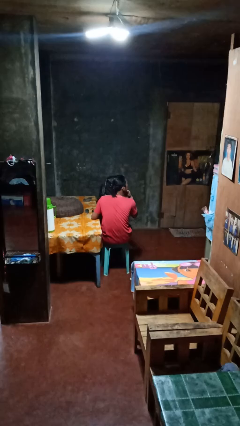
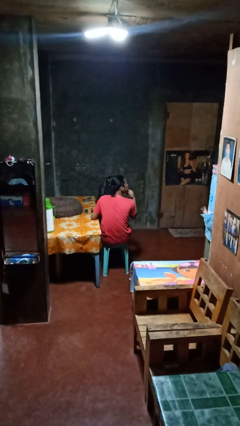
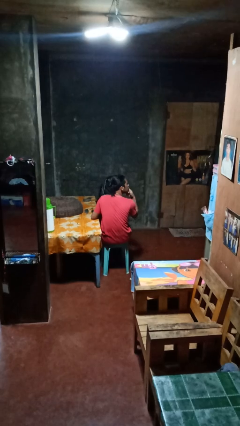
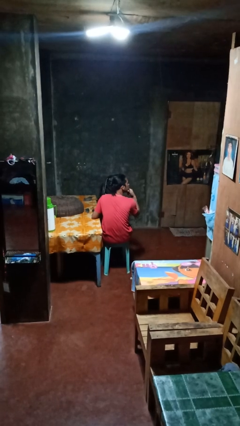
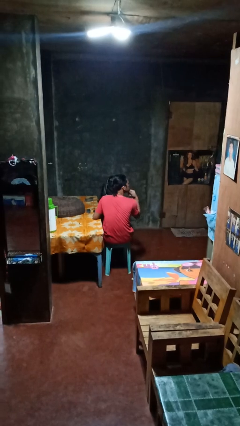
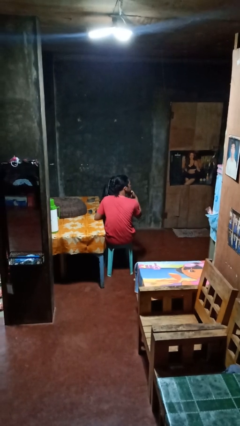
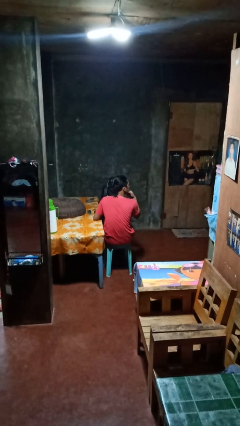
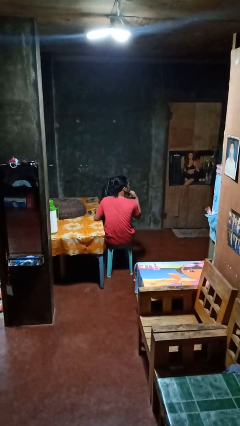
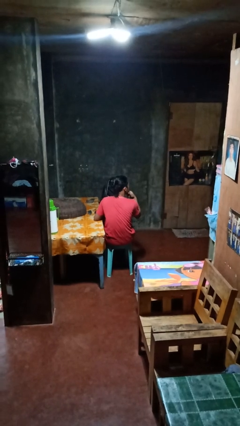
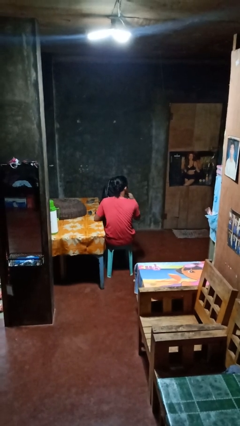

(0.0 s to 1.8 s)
person strokes chin

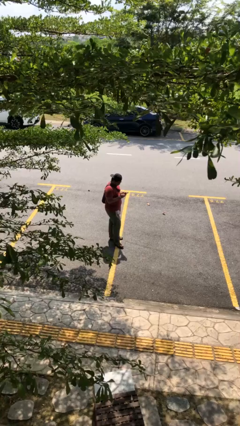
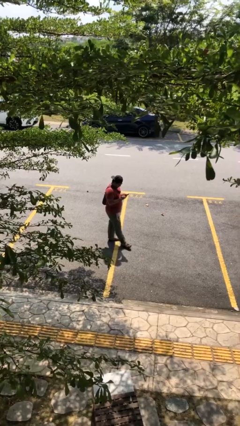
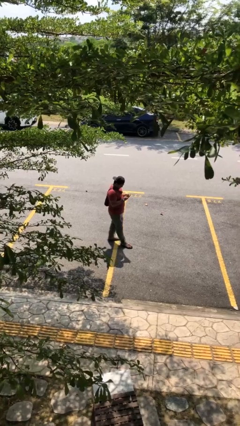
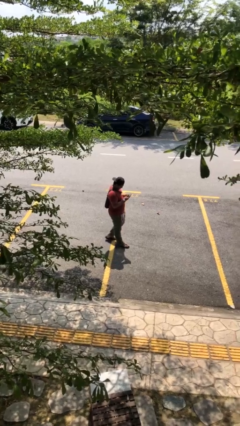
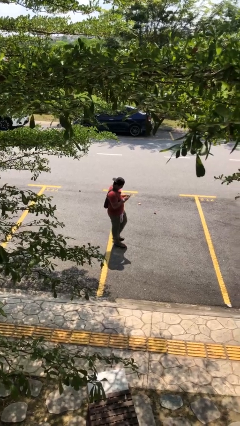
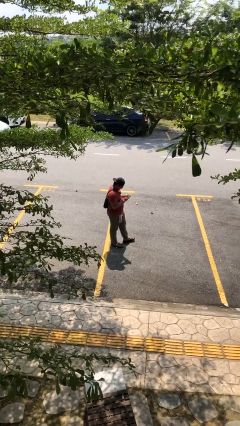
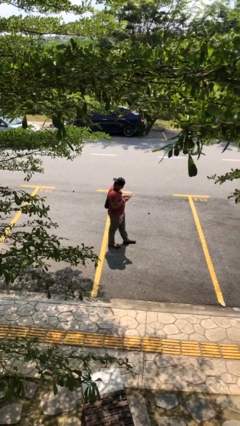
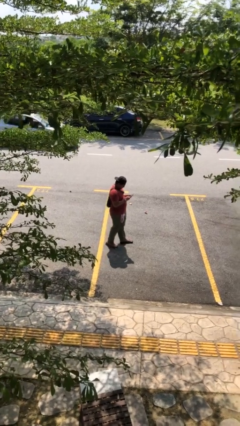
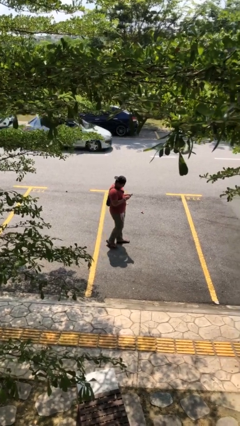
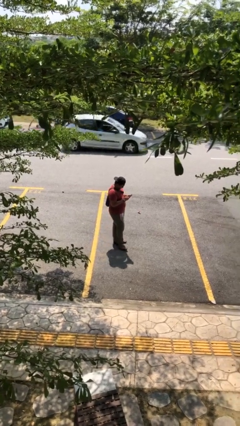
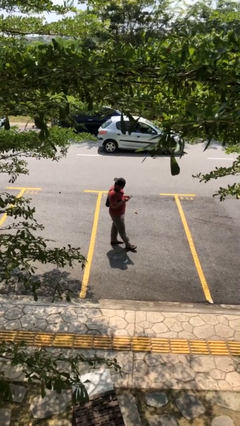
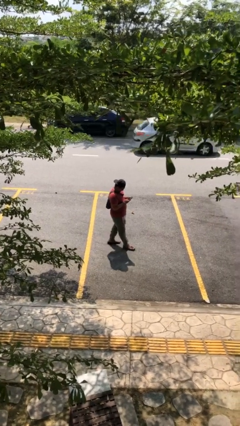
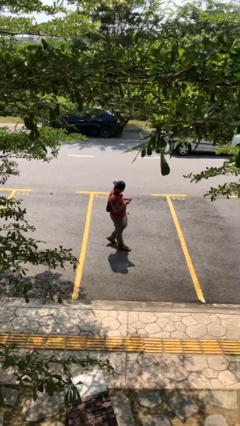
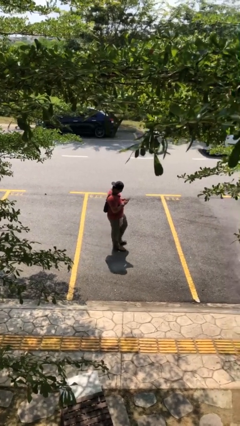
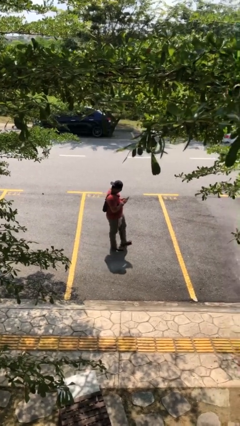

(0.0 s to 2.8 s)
person texts on phone

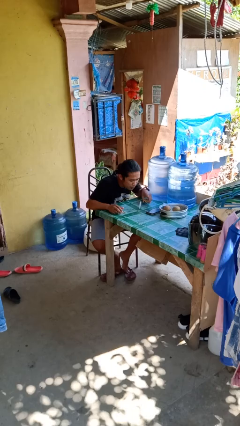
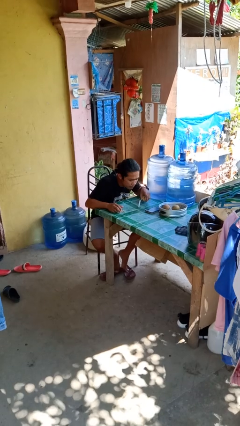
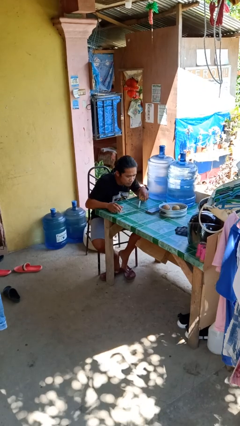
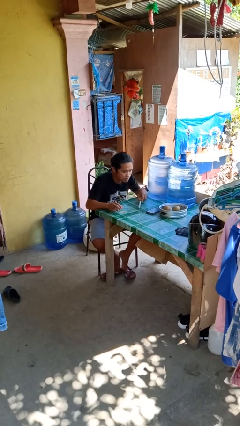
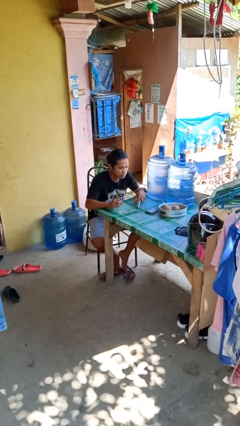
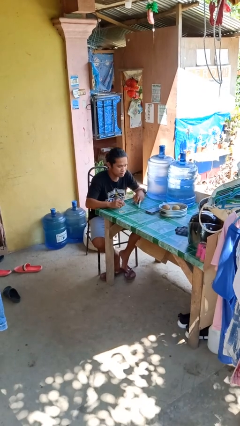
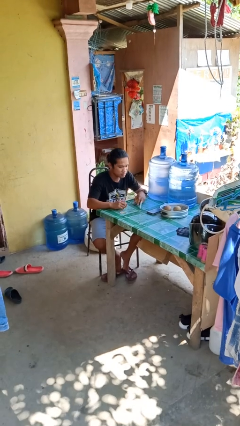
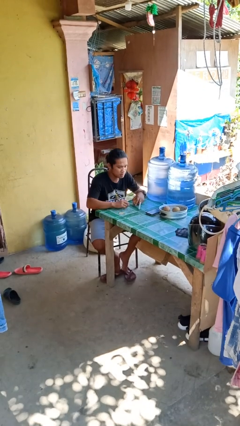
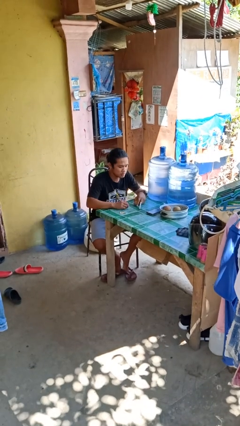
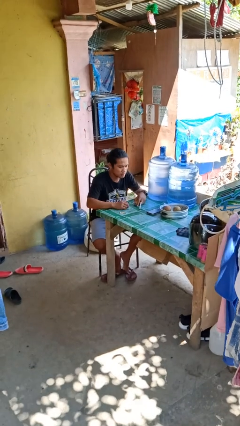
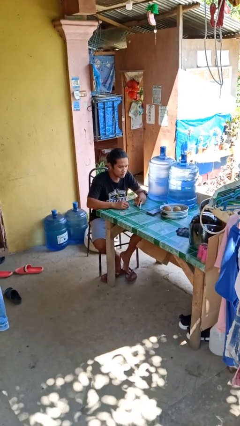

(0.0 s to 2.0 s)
person extinguishes candle

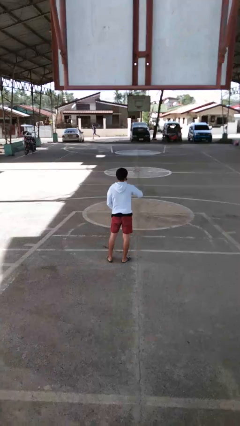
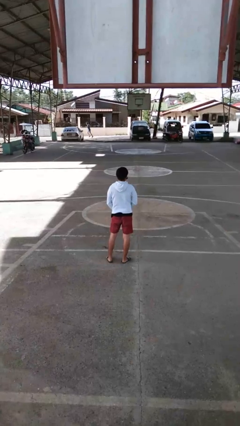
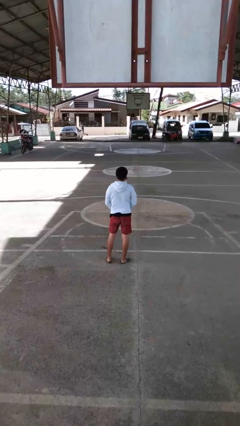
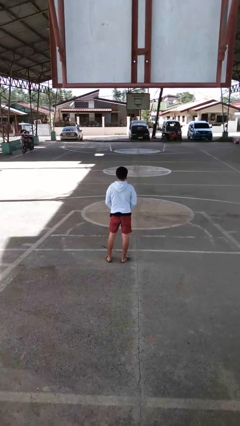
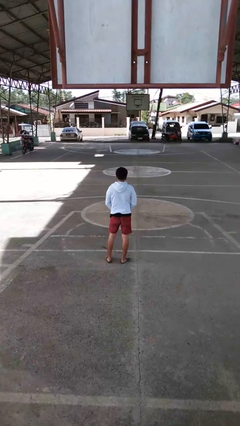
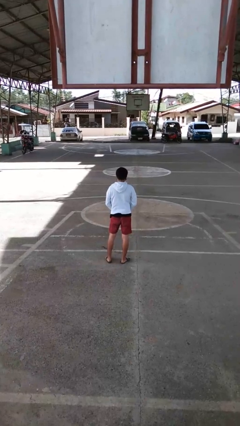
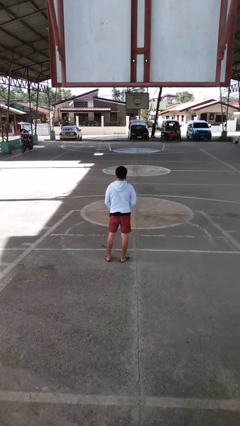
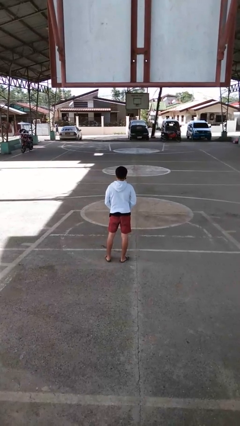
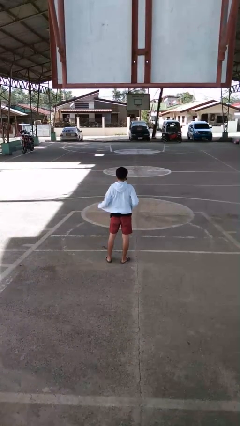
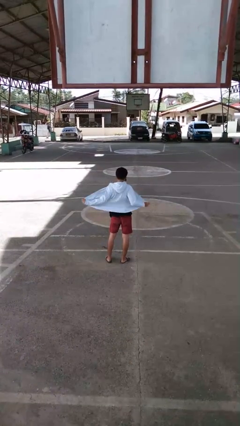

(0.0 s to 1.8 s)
person unzips jacket

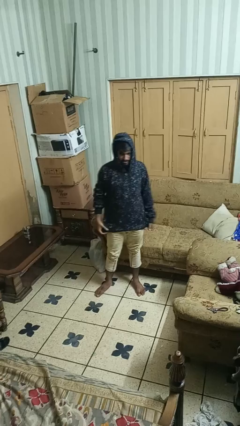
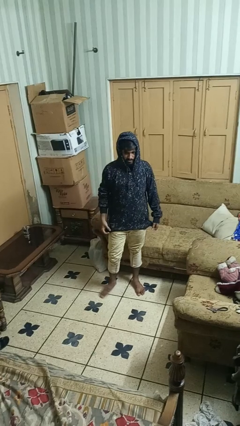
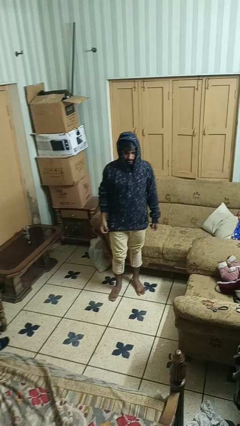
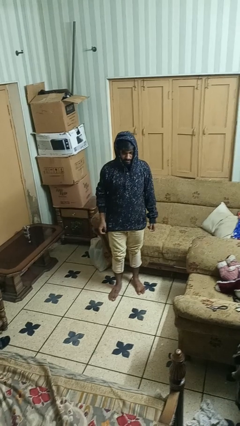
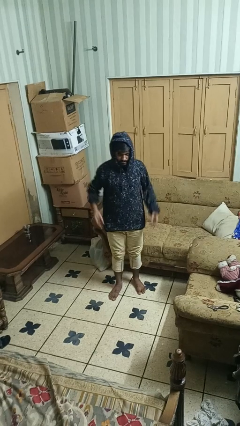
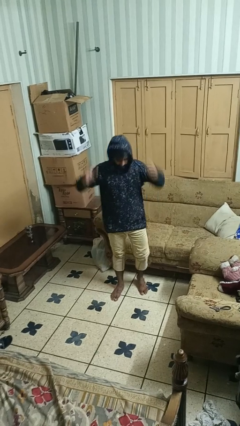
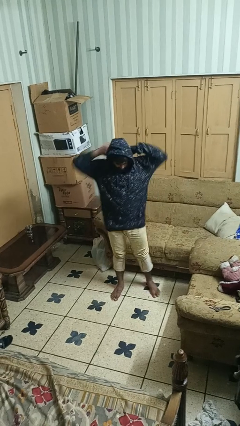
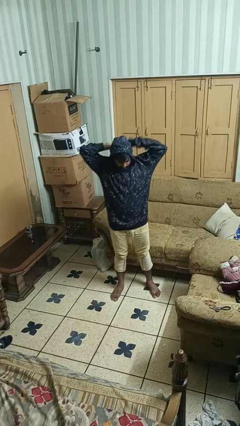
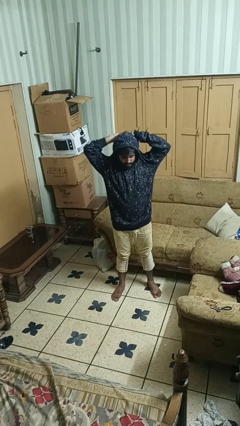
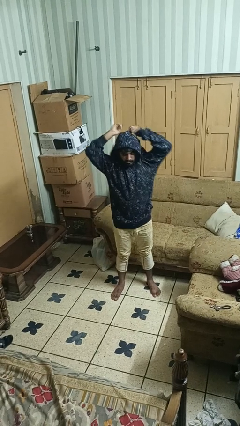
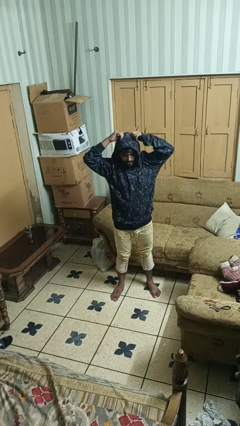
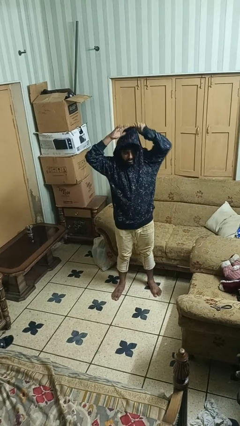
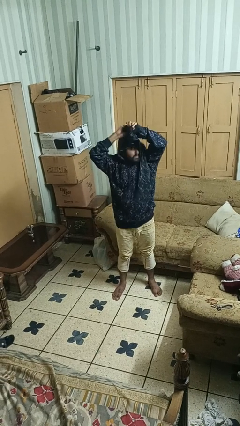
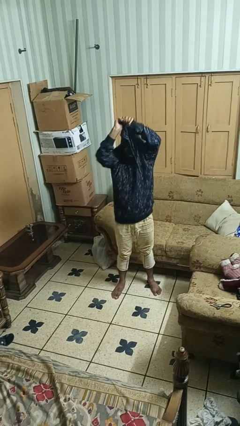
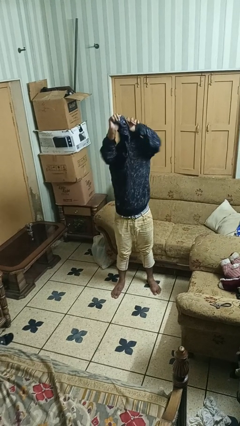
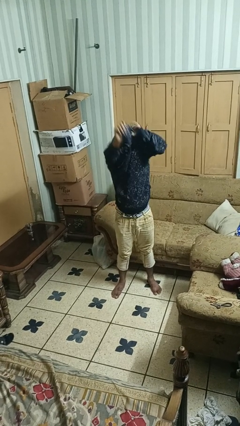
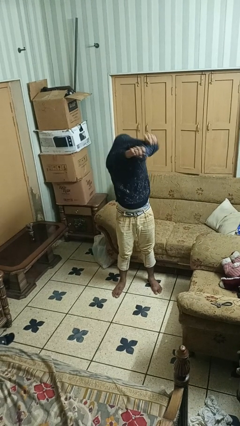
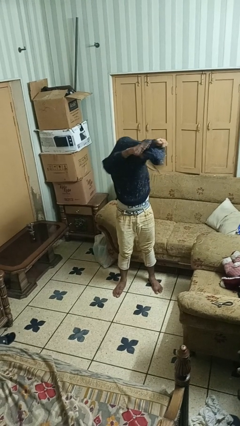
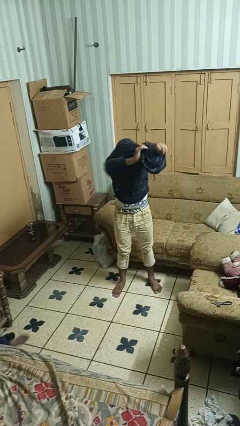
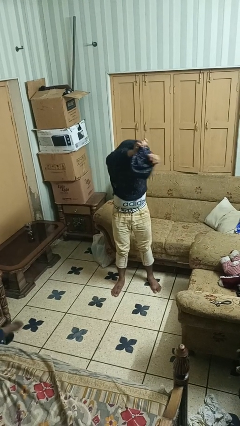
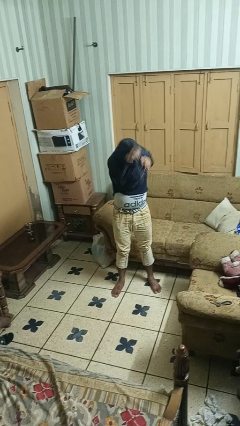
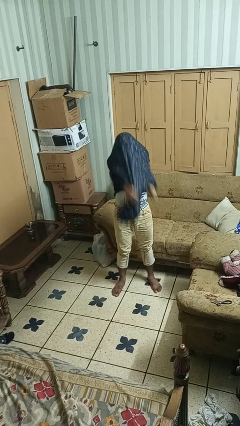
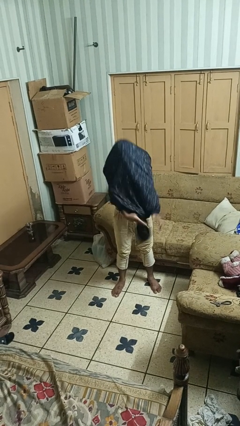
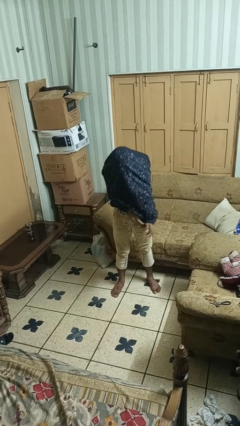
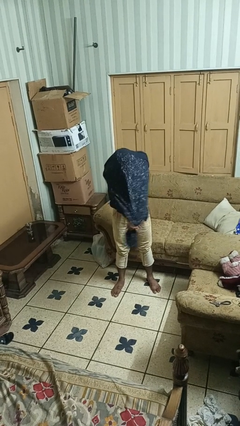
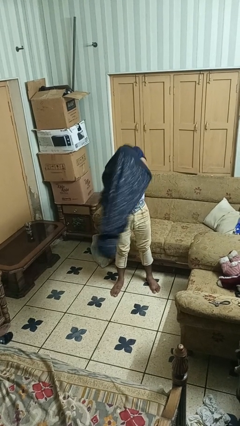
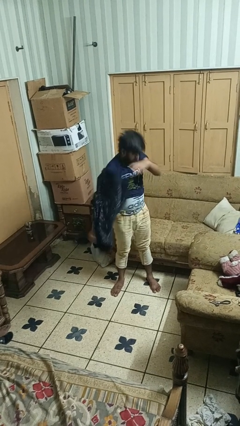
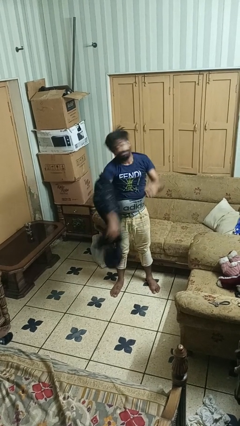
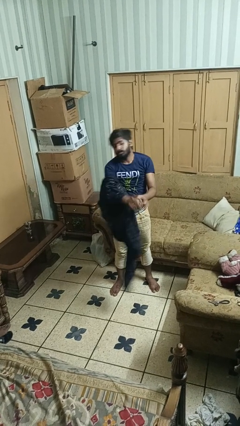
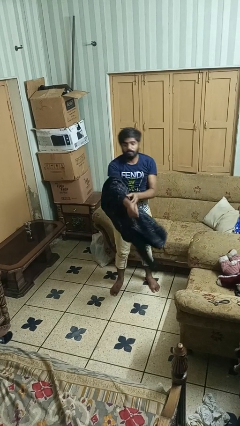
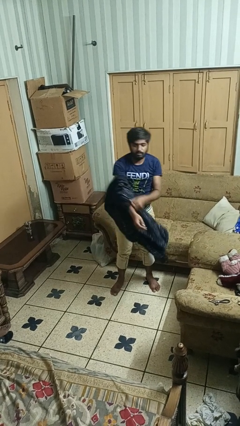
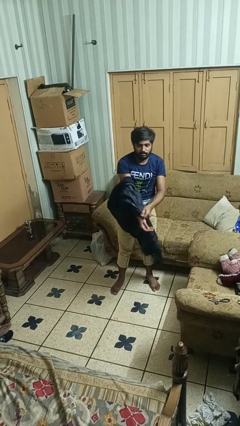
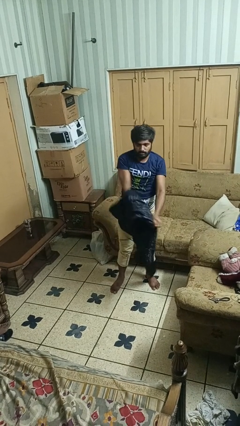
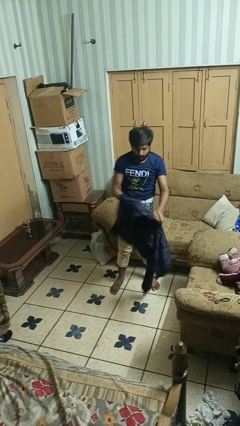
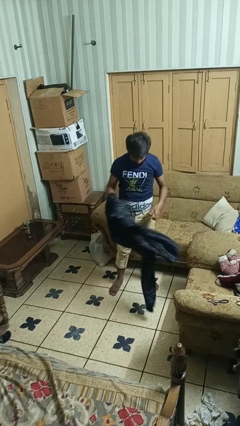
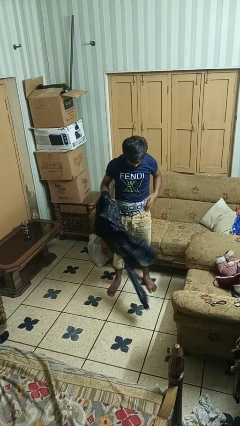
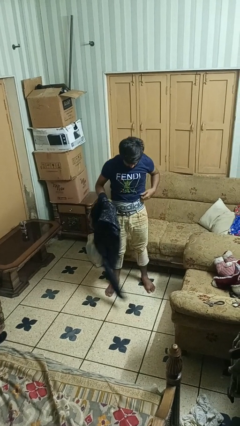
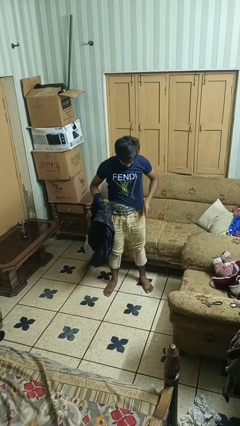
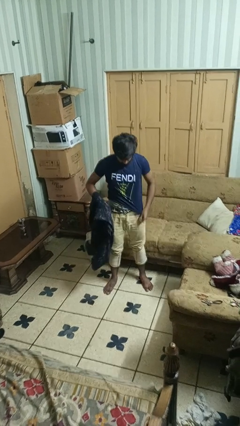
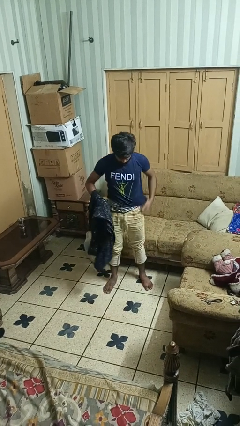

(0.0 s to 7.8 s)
person takes off hoodie

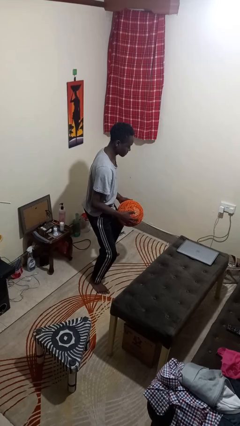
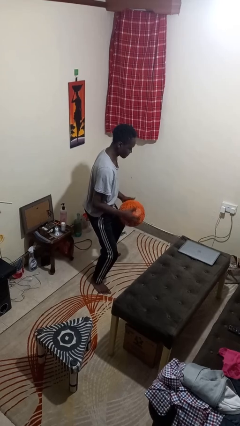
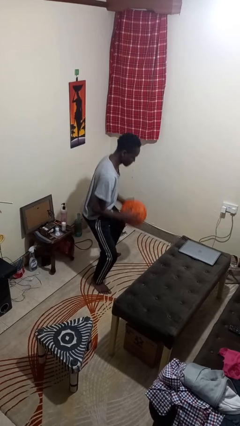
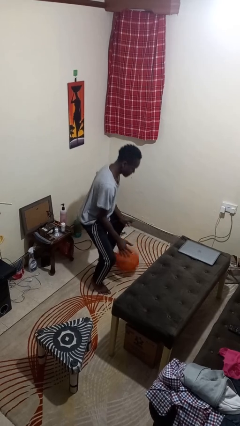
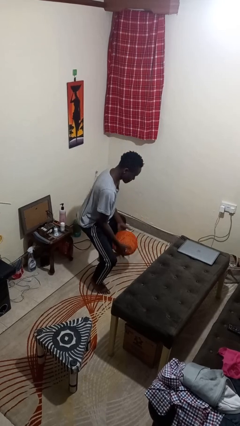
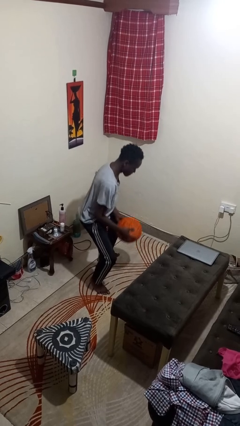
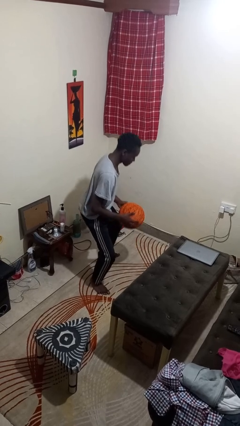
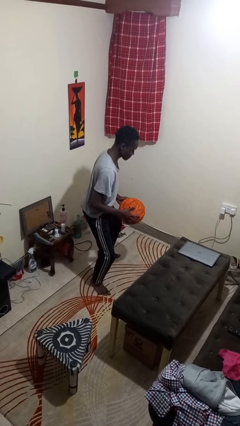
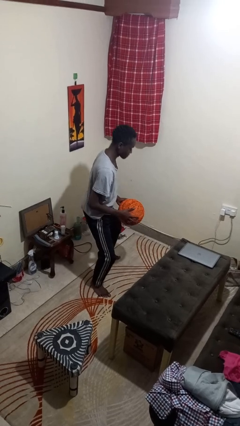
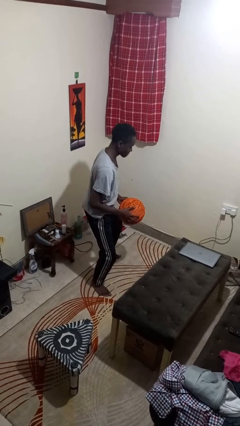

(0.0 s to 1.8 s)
person bounces ball on floor
